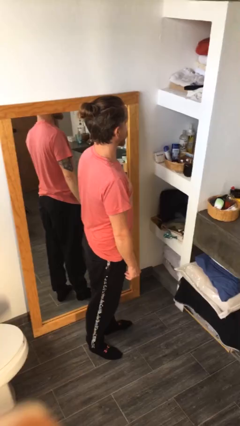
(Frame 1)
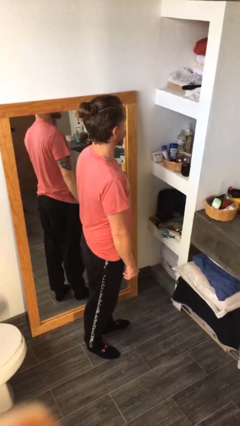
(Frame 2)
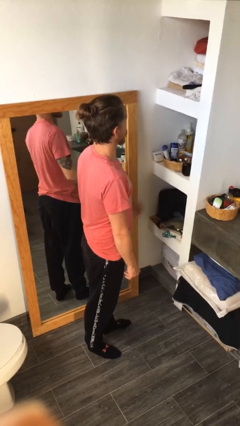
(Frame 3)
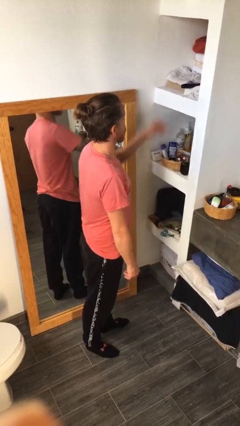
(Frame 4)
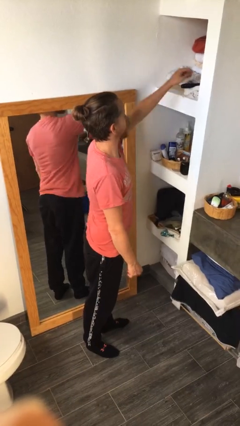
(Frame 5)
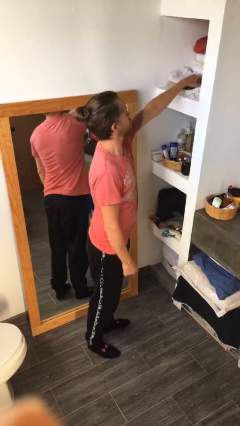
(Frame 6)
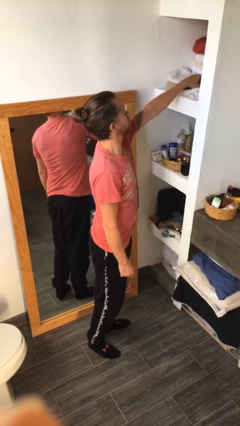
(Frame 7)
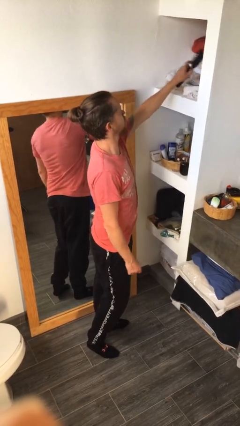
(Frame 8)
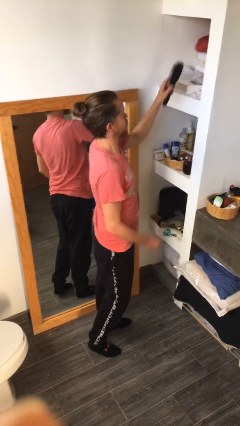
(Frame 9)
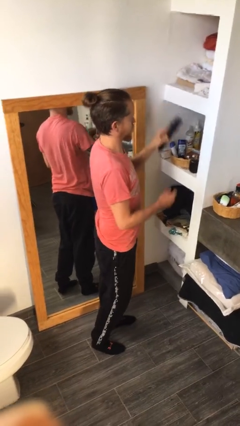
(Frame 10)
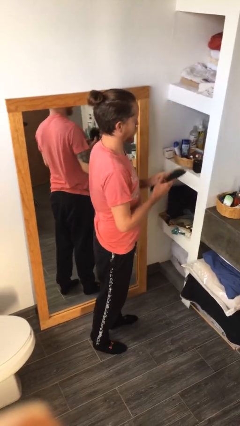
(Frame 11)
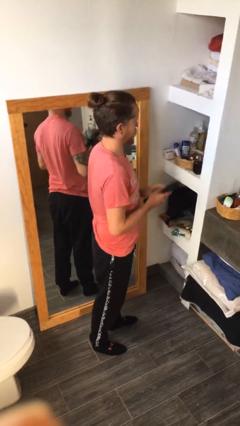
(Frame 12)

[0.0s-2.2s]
person picks up object from countertop

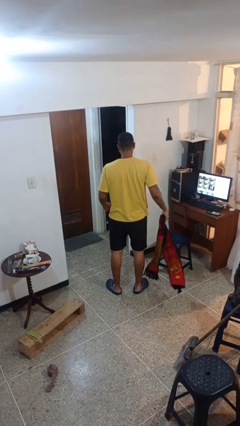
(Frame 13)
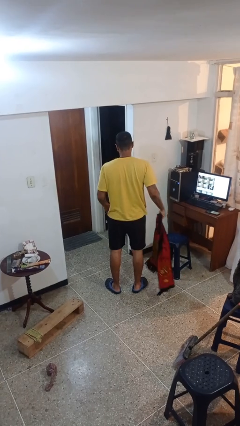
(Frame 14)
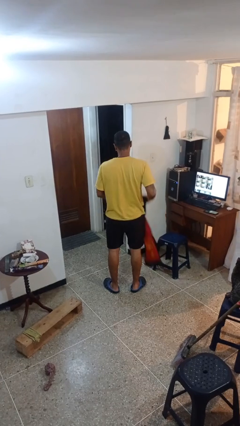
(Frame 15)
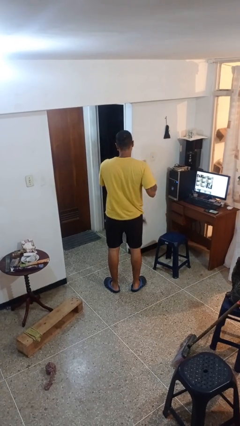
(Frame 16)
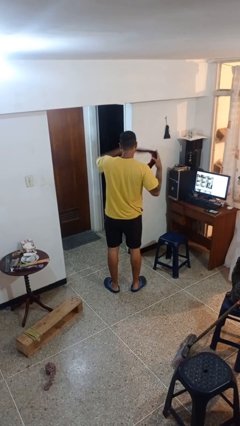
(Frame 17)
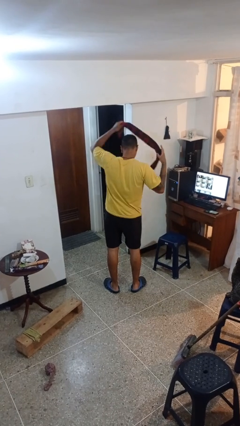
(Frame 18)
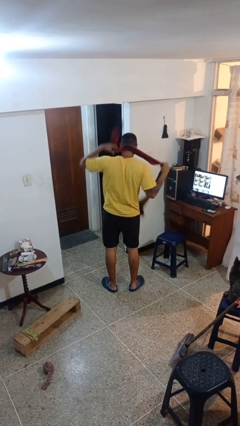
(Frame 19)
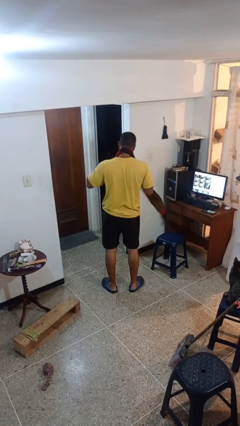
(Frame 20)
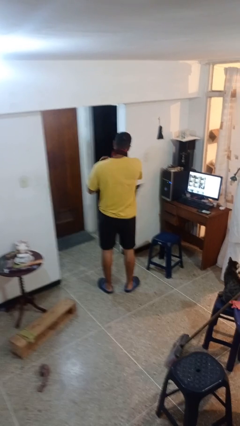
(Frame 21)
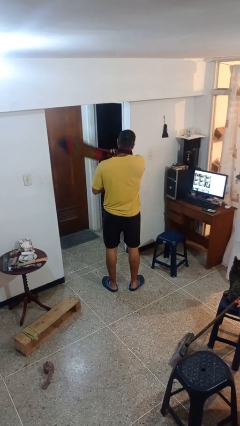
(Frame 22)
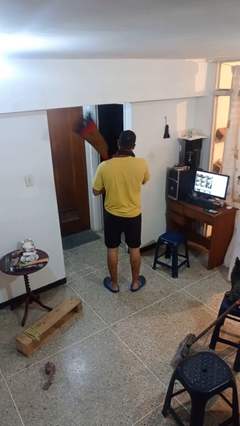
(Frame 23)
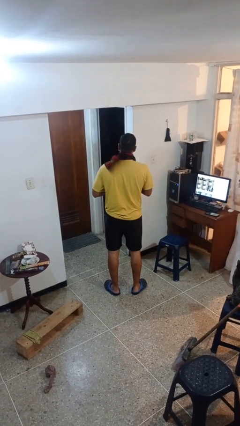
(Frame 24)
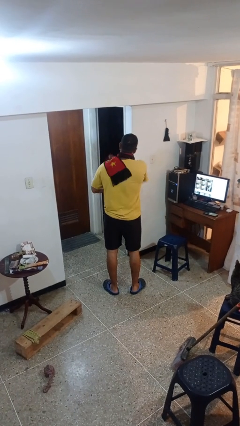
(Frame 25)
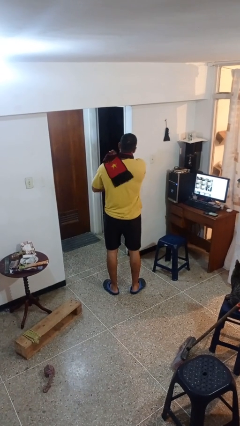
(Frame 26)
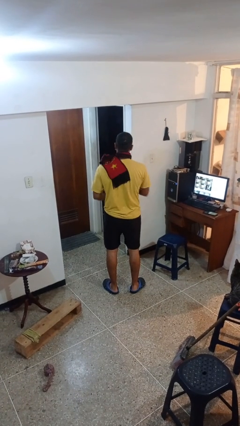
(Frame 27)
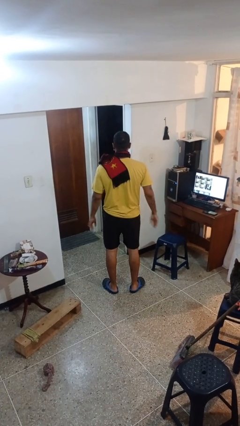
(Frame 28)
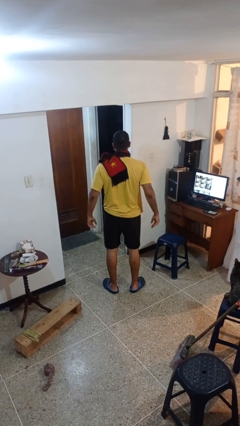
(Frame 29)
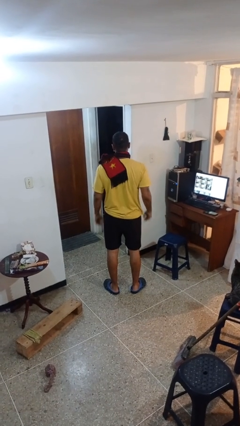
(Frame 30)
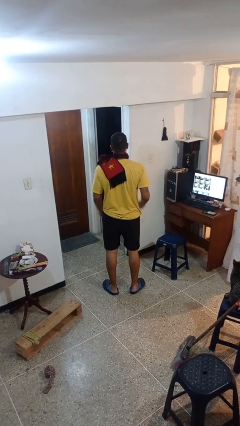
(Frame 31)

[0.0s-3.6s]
person puts on scarf

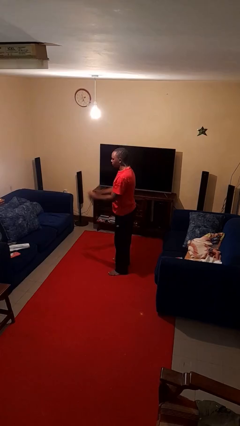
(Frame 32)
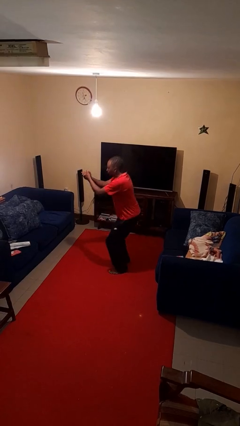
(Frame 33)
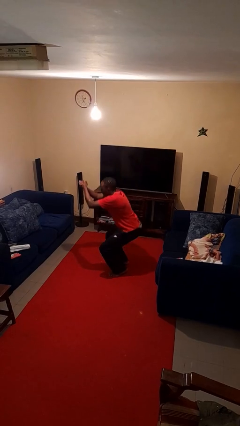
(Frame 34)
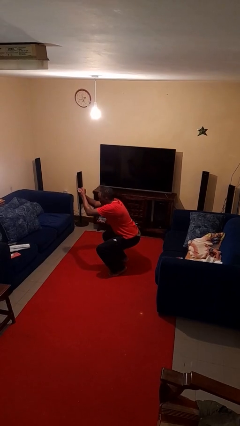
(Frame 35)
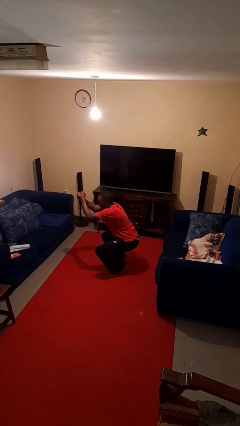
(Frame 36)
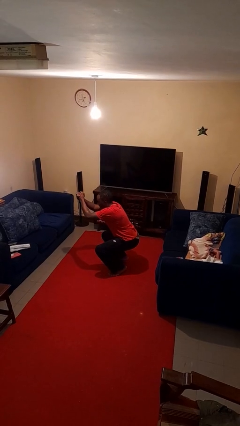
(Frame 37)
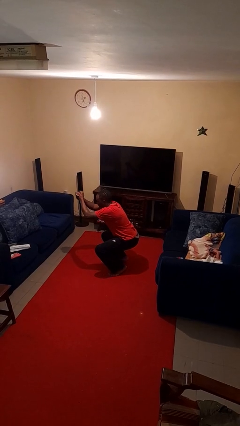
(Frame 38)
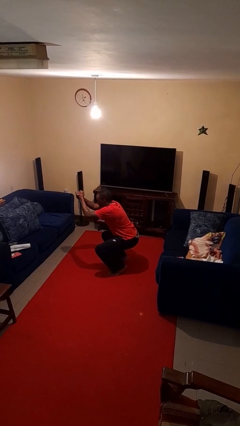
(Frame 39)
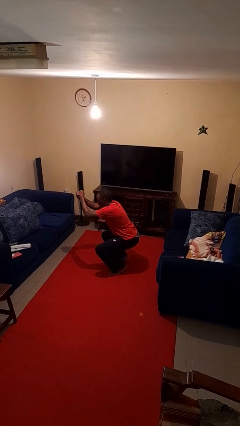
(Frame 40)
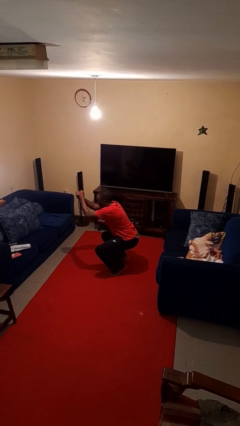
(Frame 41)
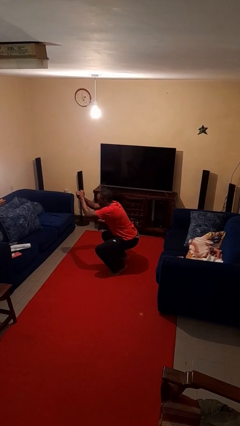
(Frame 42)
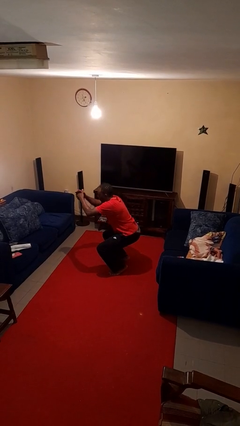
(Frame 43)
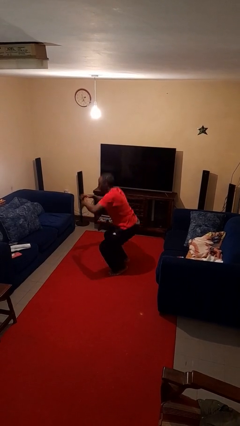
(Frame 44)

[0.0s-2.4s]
person squats

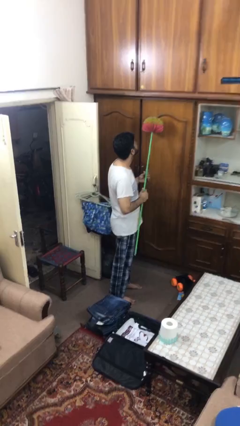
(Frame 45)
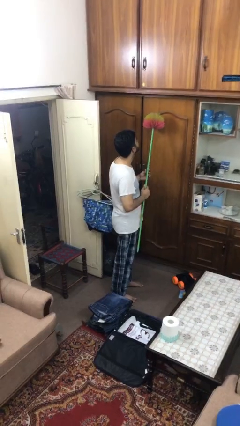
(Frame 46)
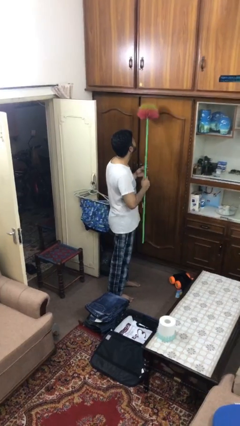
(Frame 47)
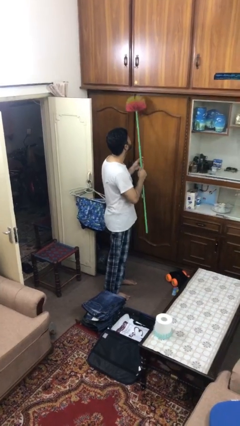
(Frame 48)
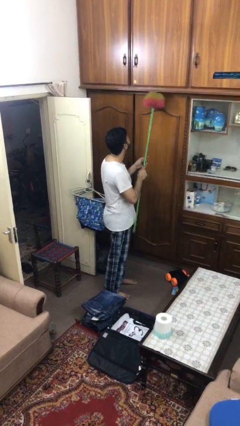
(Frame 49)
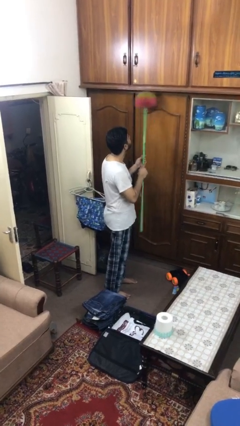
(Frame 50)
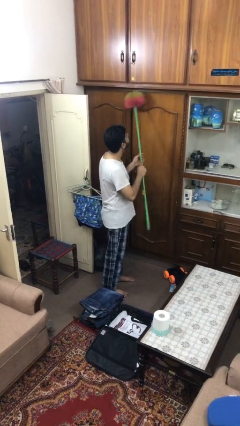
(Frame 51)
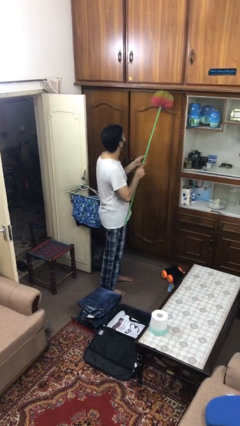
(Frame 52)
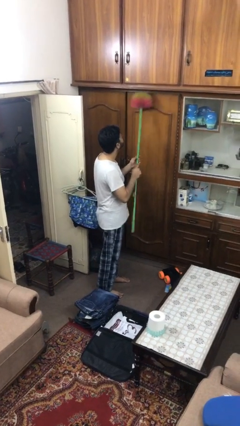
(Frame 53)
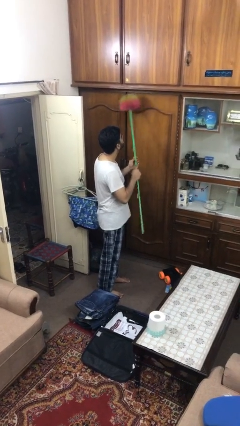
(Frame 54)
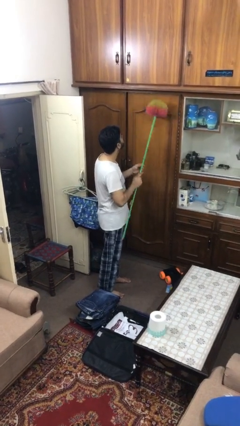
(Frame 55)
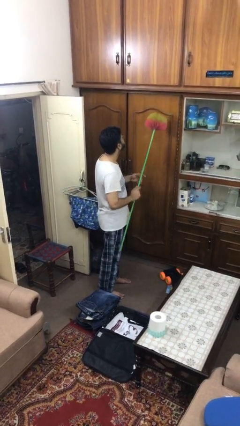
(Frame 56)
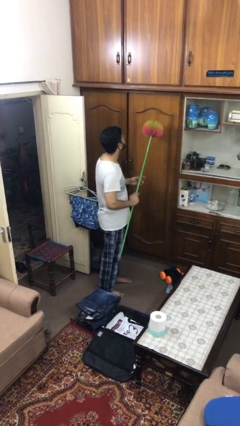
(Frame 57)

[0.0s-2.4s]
person dusts furniture

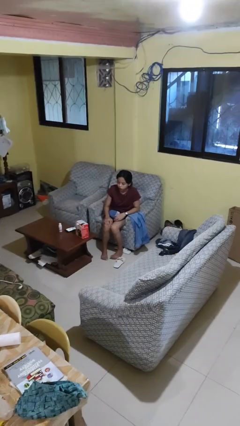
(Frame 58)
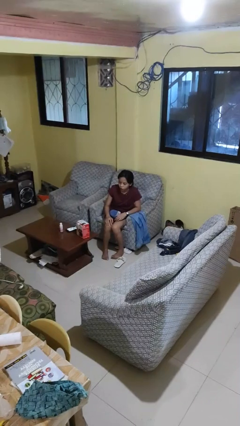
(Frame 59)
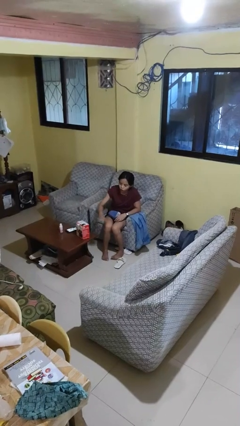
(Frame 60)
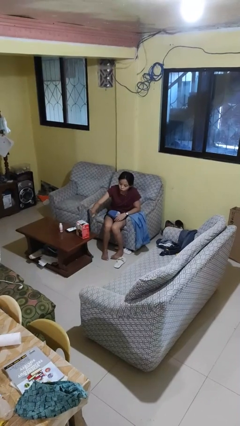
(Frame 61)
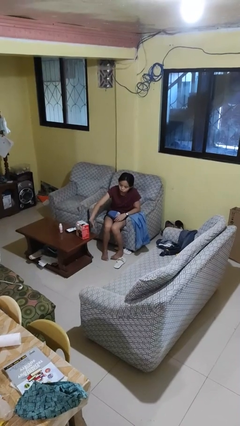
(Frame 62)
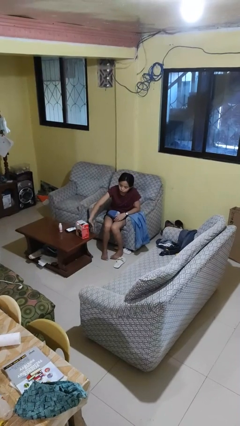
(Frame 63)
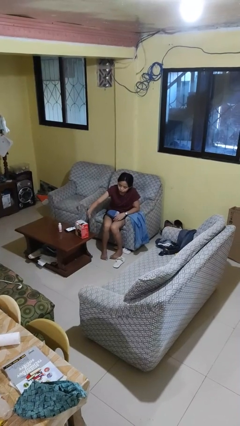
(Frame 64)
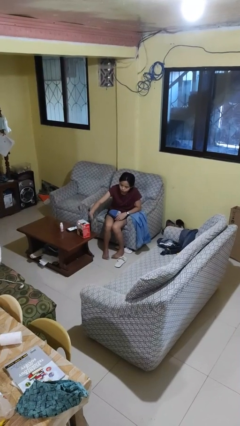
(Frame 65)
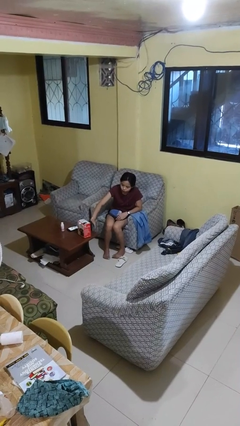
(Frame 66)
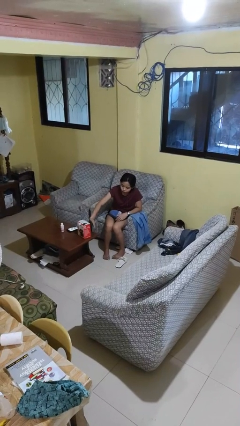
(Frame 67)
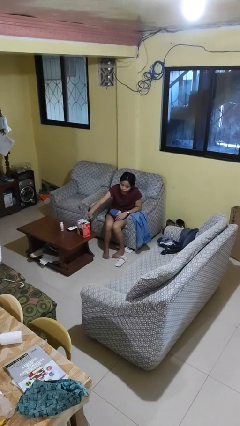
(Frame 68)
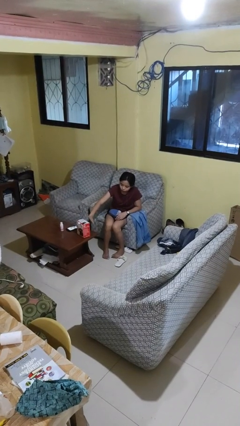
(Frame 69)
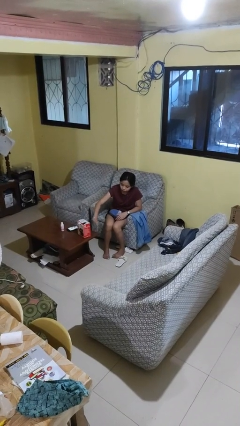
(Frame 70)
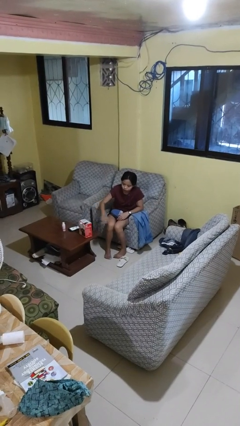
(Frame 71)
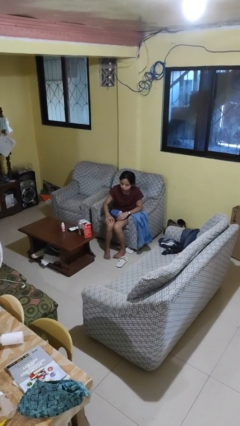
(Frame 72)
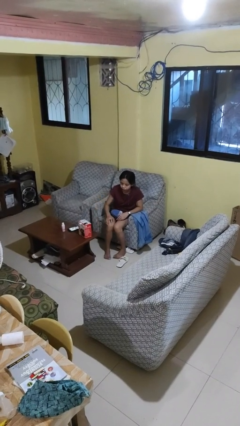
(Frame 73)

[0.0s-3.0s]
person waves hand over object

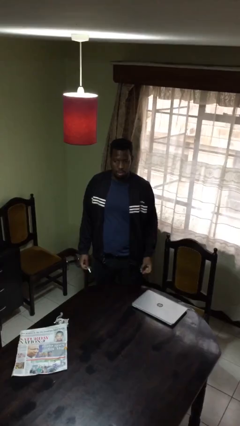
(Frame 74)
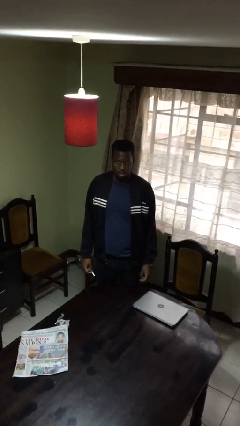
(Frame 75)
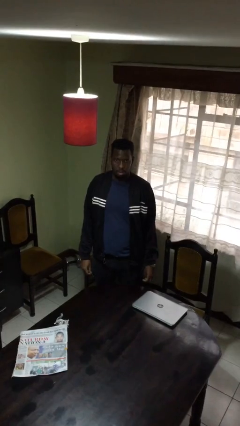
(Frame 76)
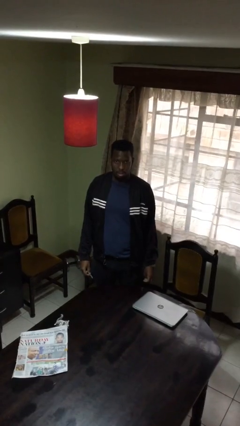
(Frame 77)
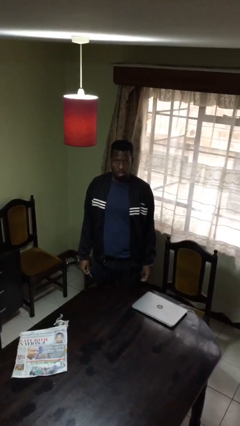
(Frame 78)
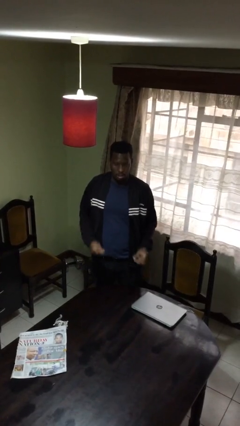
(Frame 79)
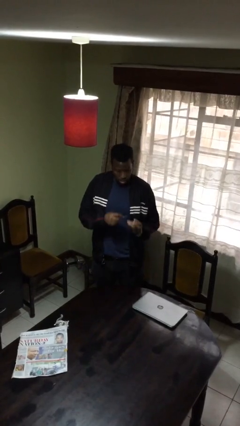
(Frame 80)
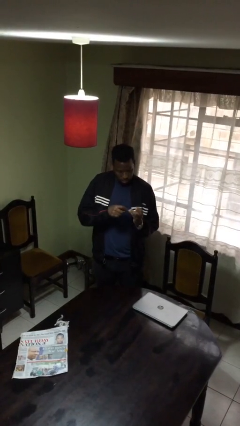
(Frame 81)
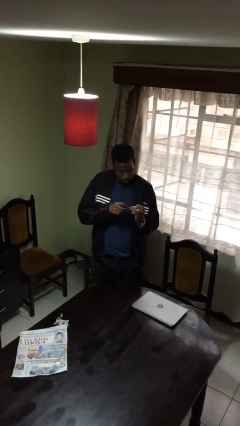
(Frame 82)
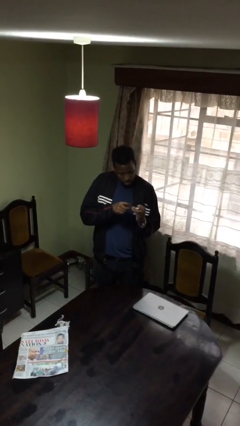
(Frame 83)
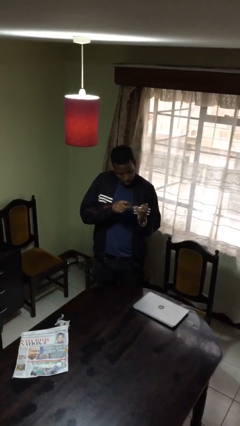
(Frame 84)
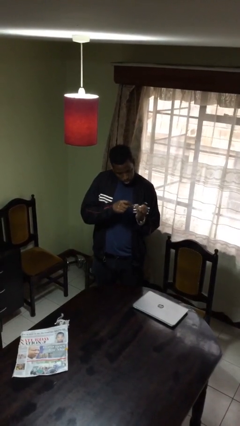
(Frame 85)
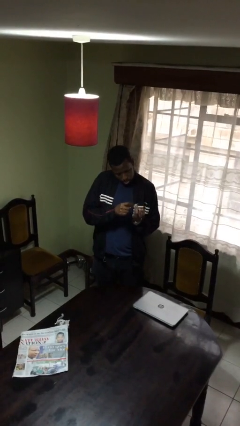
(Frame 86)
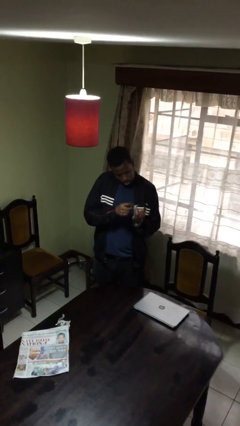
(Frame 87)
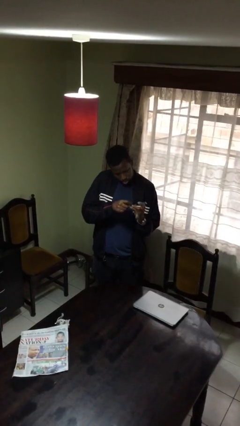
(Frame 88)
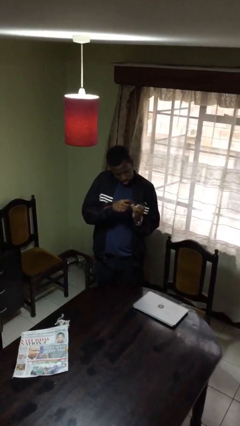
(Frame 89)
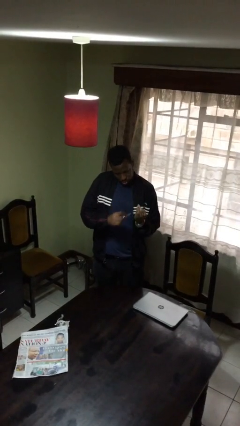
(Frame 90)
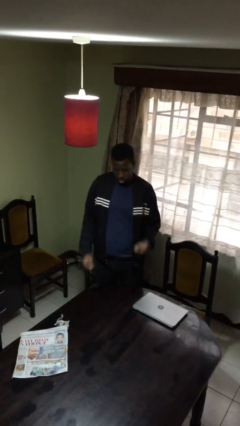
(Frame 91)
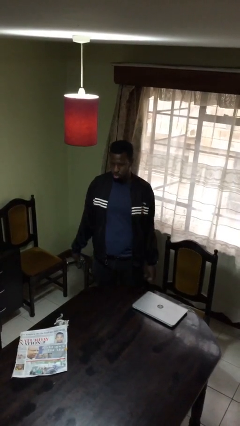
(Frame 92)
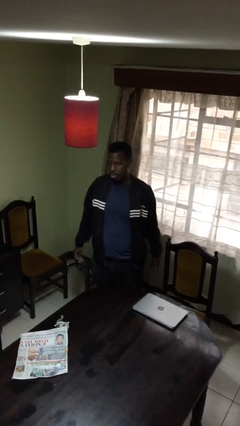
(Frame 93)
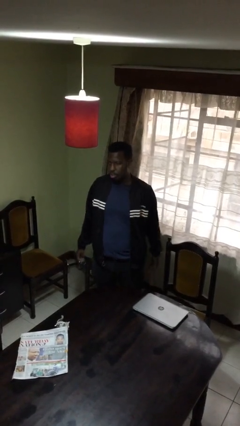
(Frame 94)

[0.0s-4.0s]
person files fingernails
